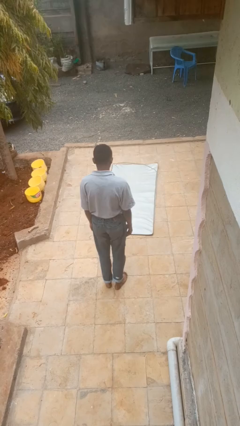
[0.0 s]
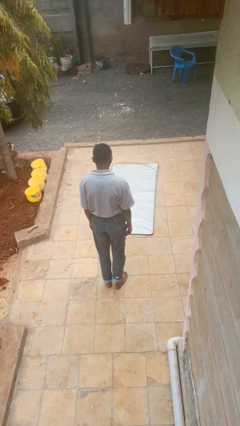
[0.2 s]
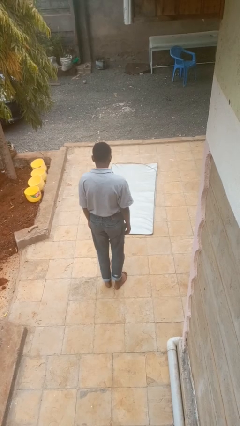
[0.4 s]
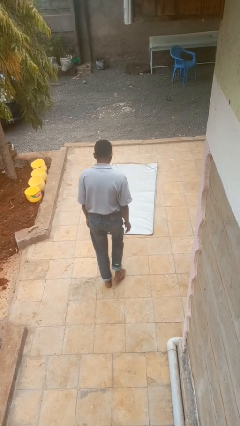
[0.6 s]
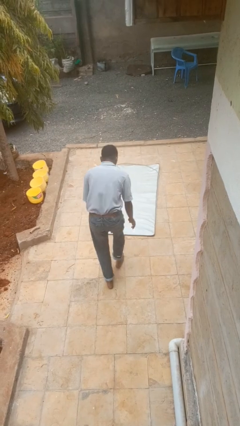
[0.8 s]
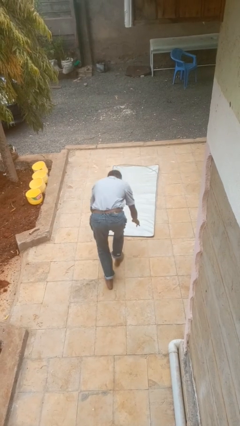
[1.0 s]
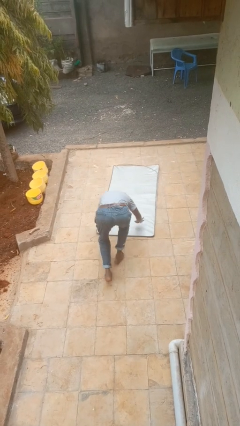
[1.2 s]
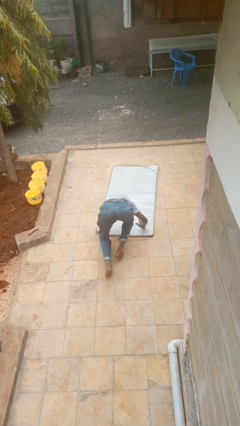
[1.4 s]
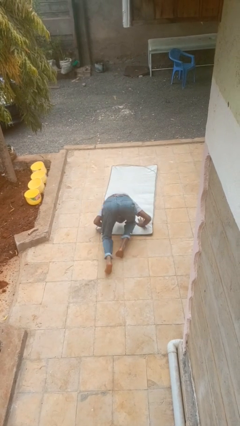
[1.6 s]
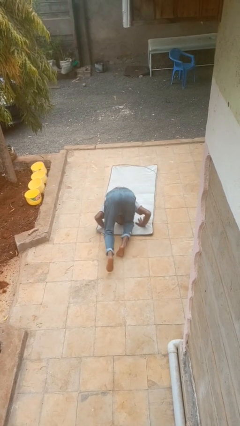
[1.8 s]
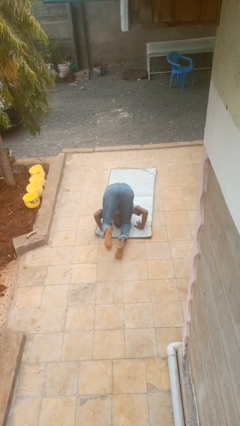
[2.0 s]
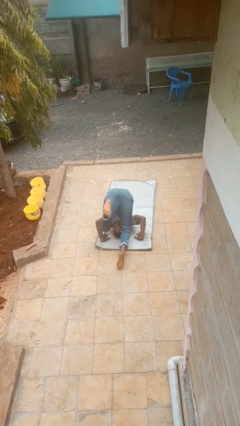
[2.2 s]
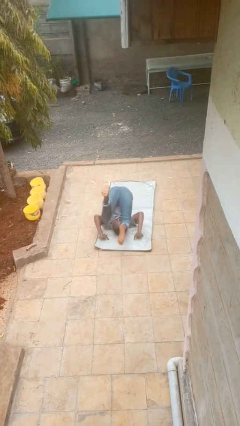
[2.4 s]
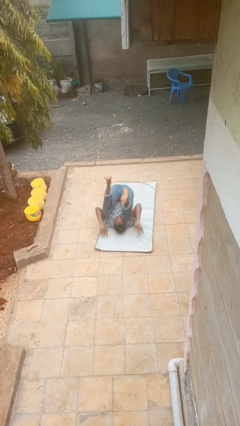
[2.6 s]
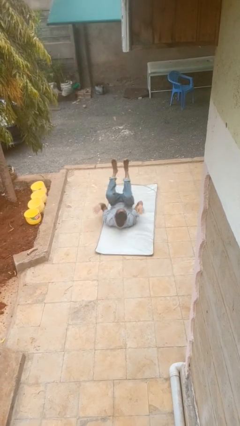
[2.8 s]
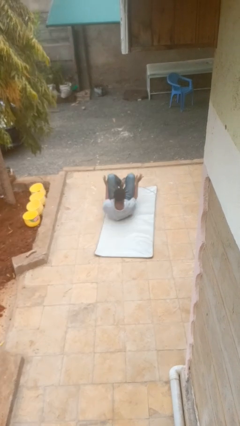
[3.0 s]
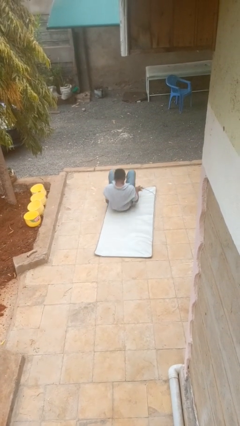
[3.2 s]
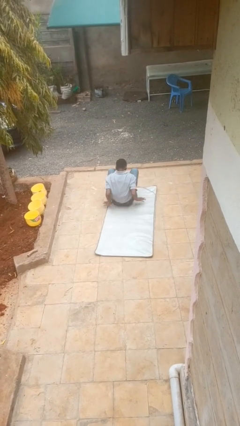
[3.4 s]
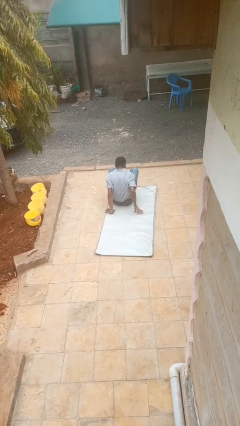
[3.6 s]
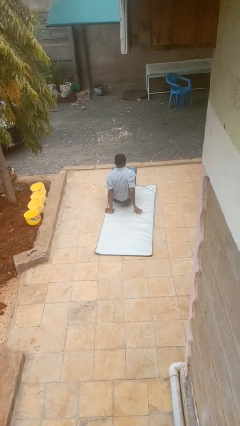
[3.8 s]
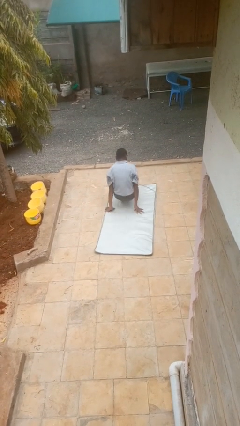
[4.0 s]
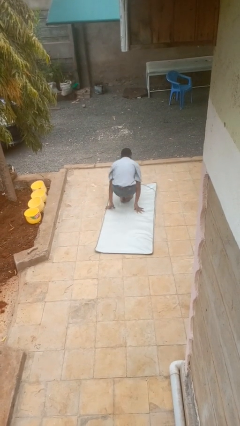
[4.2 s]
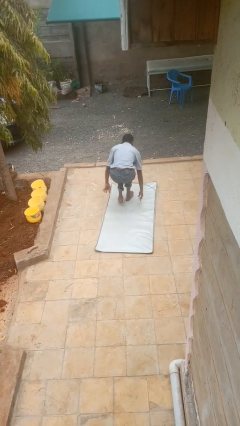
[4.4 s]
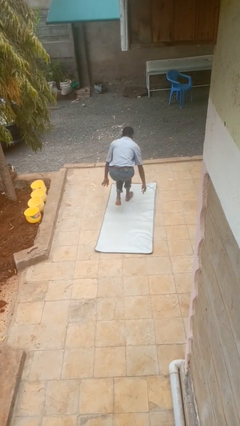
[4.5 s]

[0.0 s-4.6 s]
person somersaults

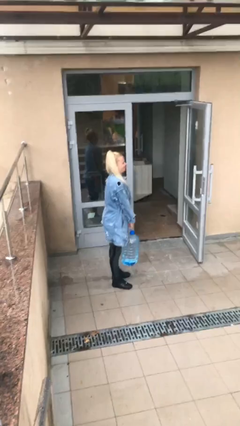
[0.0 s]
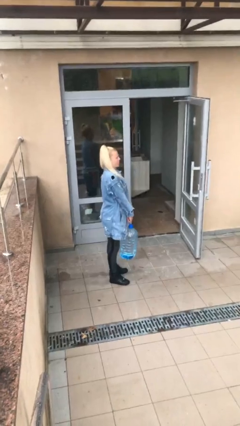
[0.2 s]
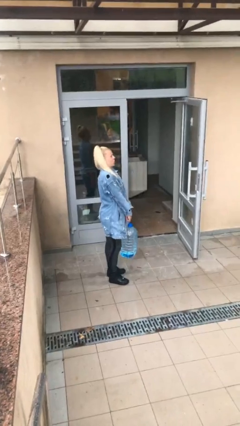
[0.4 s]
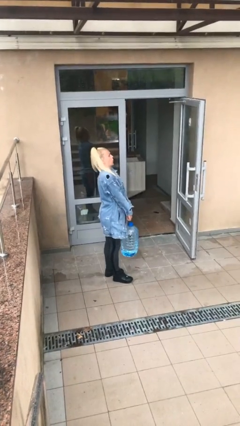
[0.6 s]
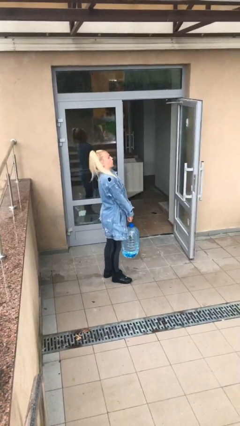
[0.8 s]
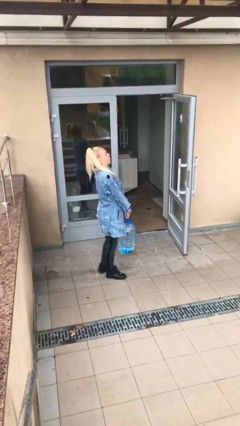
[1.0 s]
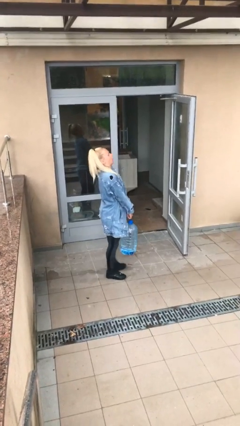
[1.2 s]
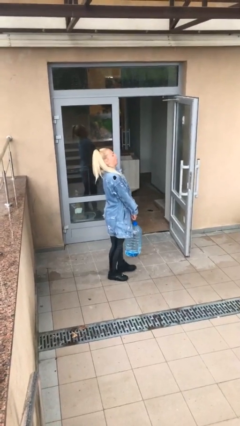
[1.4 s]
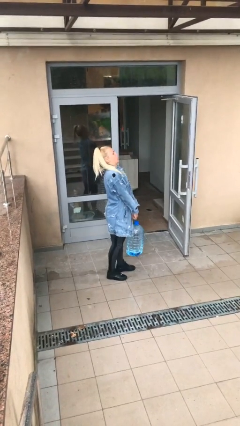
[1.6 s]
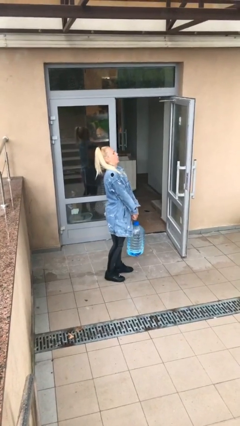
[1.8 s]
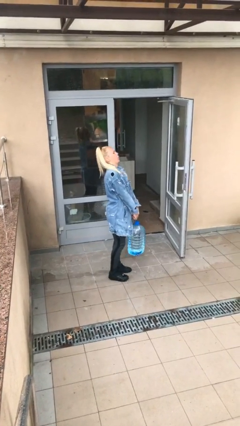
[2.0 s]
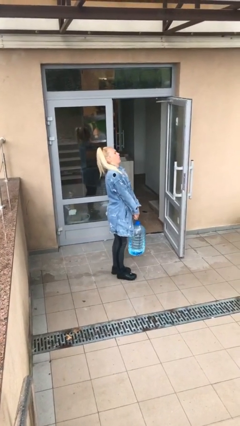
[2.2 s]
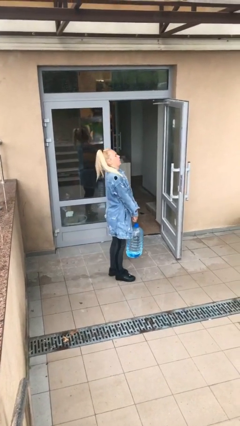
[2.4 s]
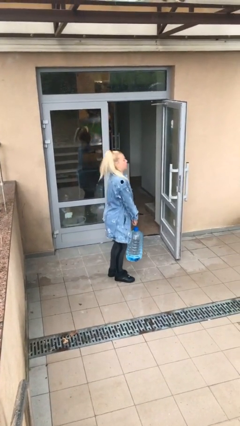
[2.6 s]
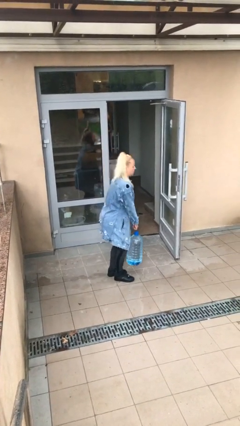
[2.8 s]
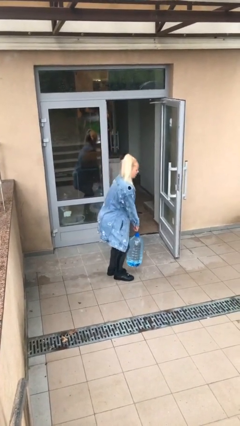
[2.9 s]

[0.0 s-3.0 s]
person carries heavy object

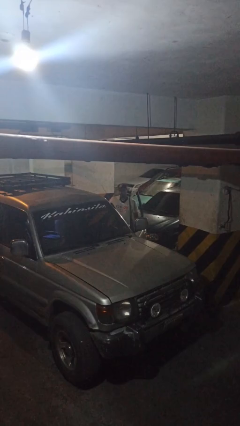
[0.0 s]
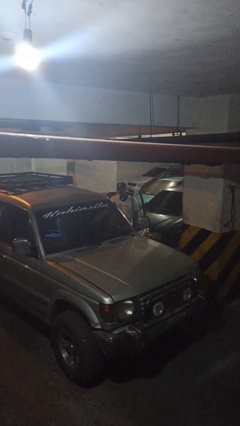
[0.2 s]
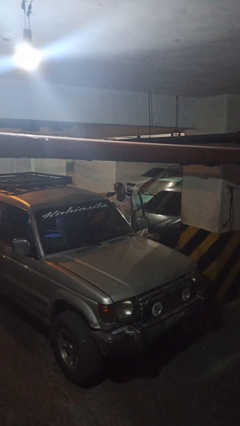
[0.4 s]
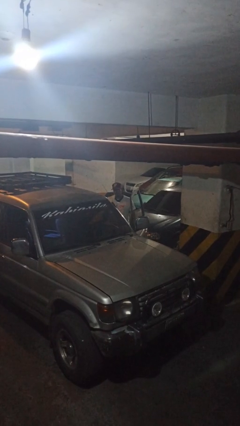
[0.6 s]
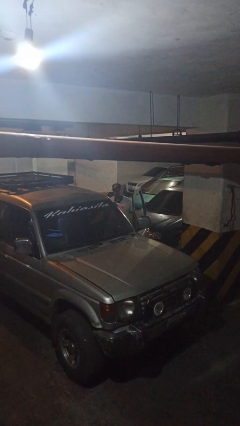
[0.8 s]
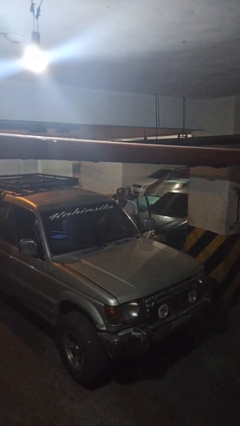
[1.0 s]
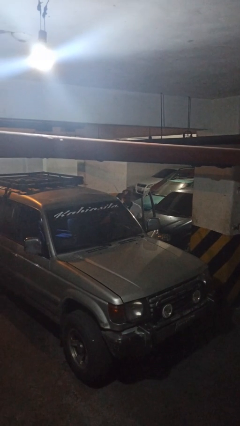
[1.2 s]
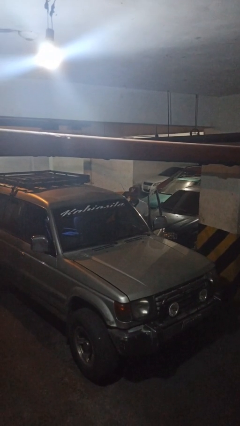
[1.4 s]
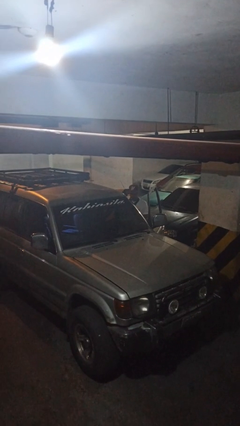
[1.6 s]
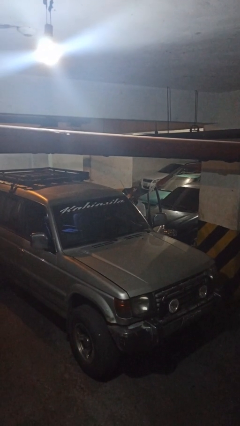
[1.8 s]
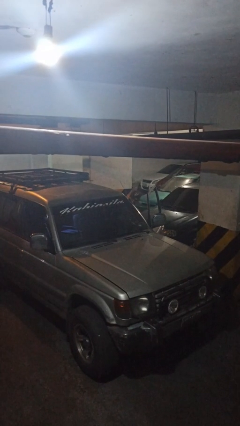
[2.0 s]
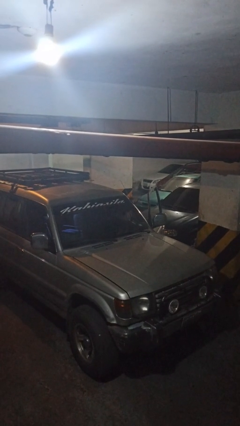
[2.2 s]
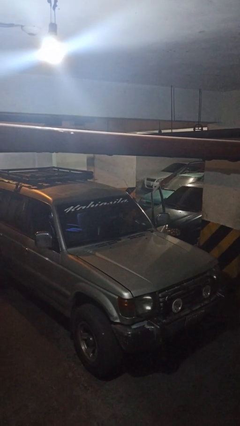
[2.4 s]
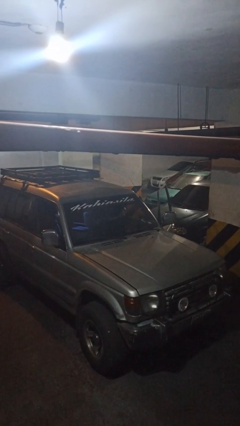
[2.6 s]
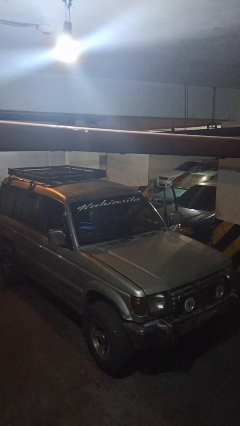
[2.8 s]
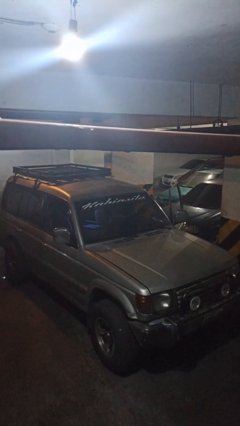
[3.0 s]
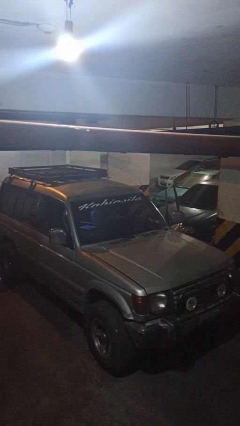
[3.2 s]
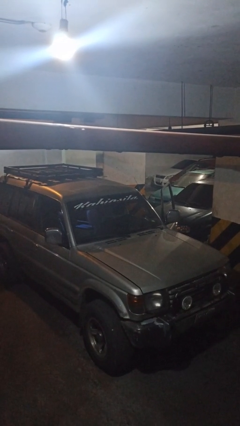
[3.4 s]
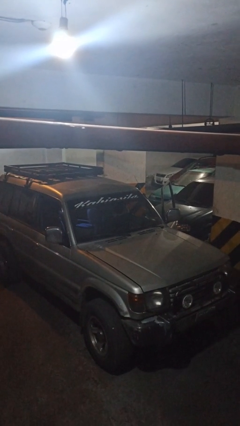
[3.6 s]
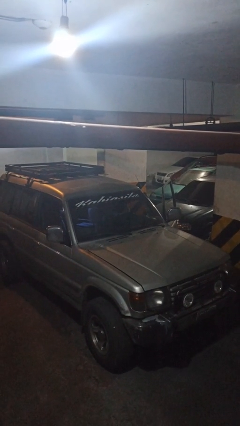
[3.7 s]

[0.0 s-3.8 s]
person enters car

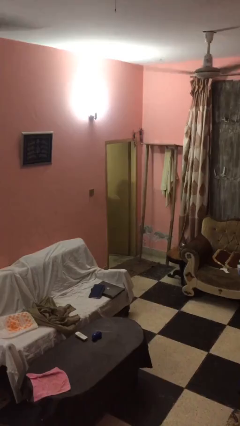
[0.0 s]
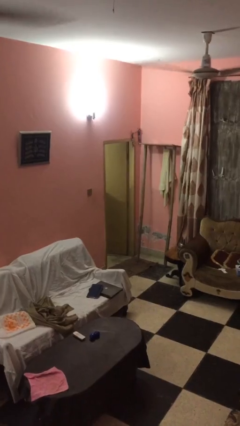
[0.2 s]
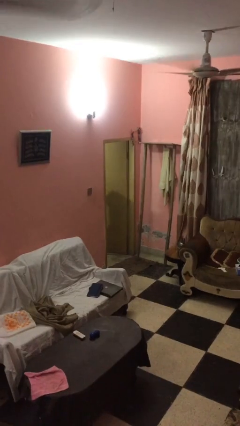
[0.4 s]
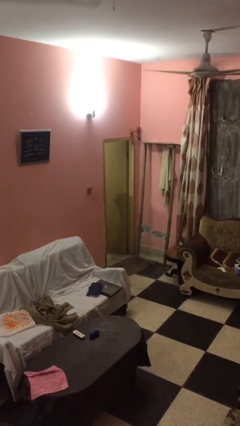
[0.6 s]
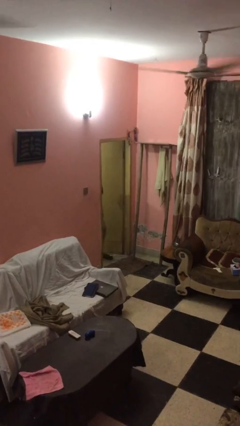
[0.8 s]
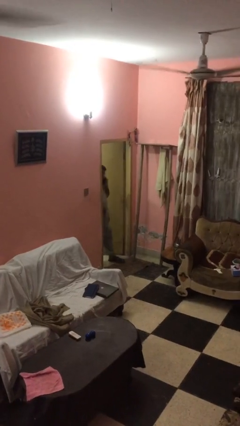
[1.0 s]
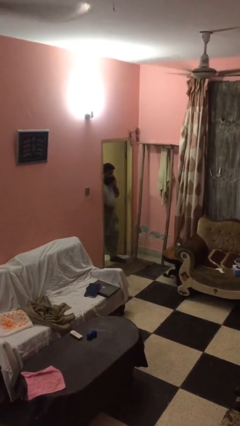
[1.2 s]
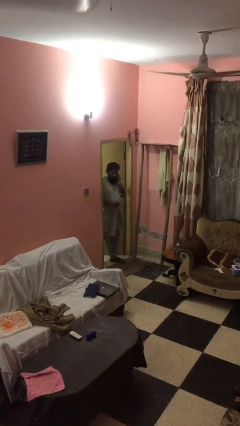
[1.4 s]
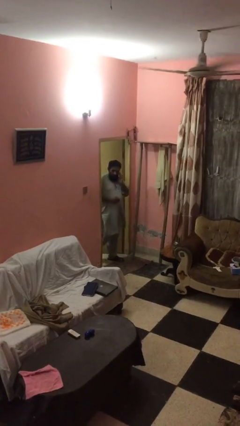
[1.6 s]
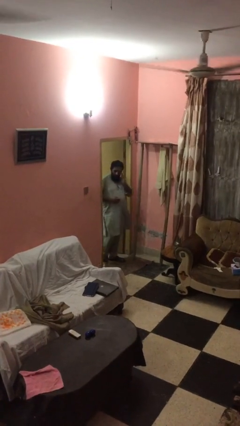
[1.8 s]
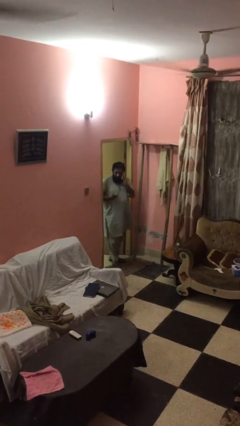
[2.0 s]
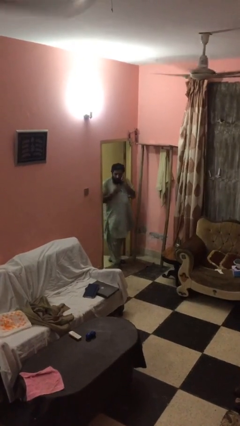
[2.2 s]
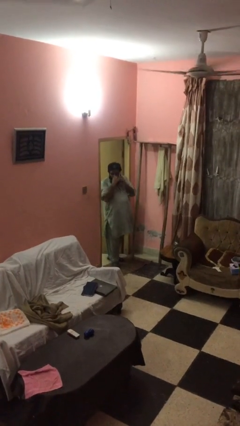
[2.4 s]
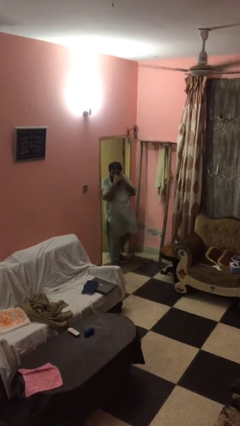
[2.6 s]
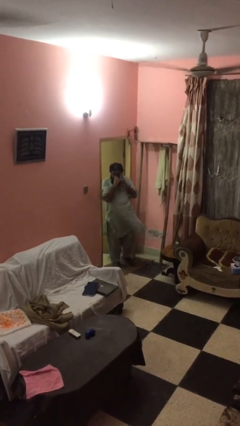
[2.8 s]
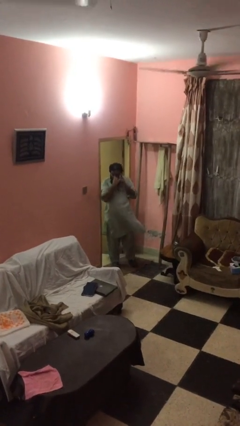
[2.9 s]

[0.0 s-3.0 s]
person enters scene through structure

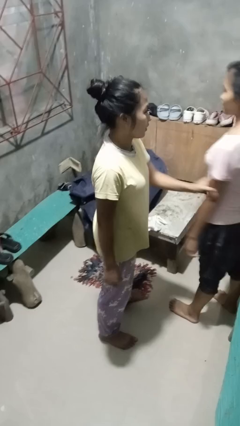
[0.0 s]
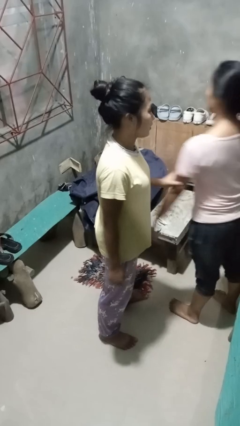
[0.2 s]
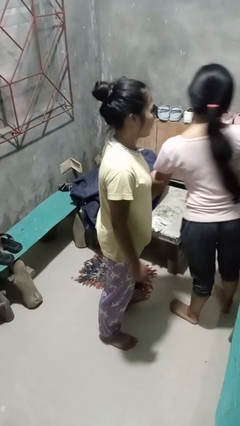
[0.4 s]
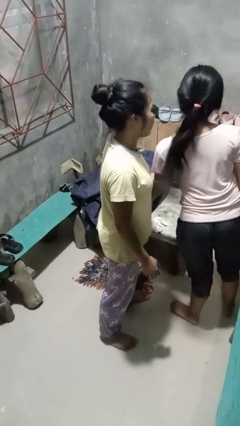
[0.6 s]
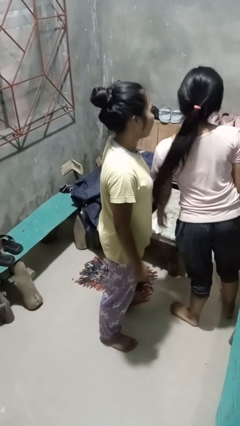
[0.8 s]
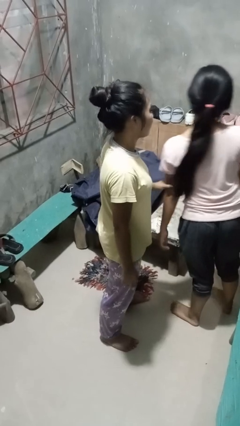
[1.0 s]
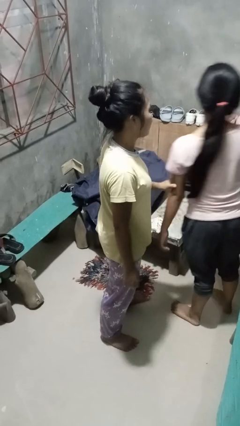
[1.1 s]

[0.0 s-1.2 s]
person grabs person by bicep

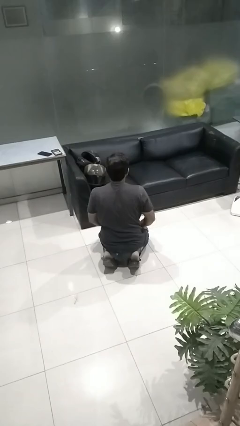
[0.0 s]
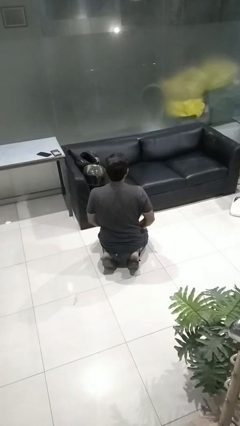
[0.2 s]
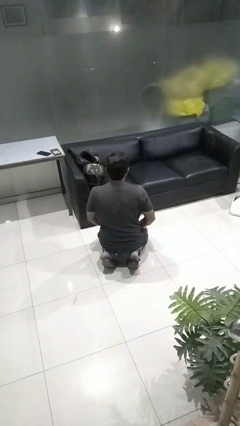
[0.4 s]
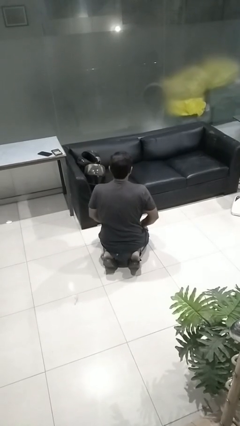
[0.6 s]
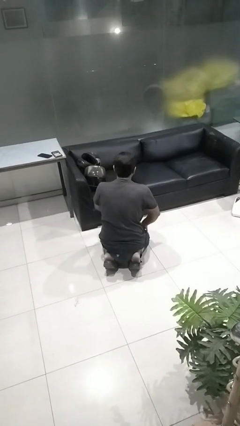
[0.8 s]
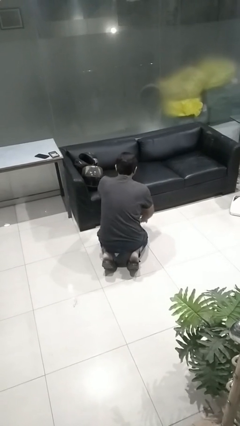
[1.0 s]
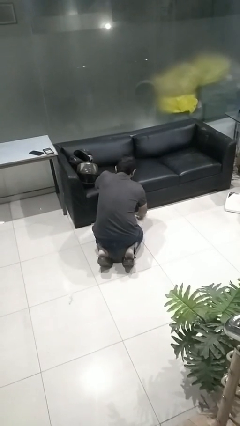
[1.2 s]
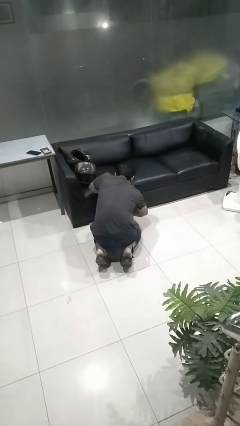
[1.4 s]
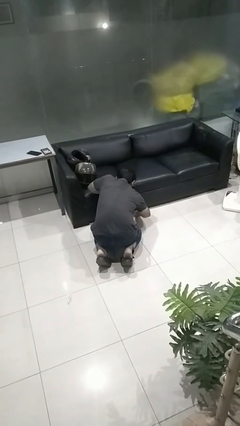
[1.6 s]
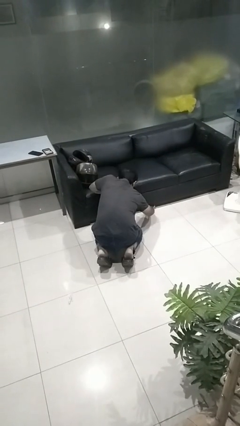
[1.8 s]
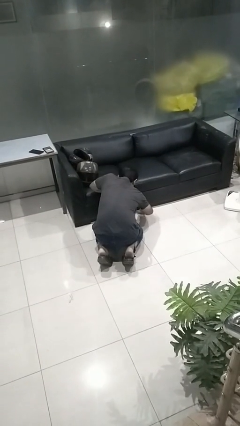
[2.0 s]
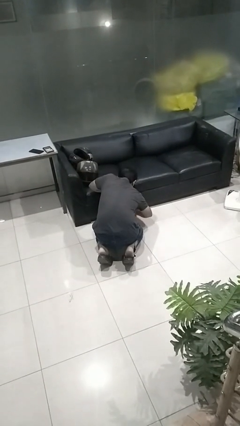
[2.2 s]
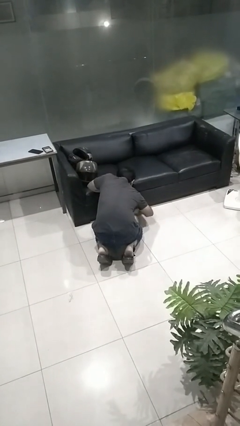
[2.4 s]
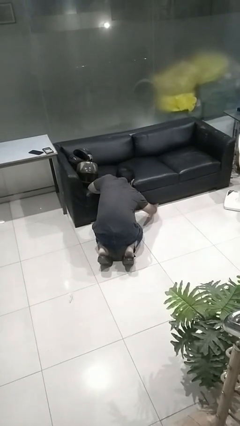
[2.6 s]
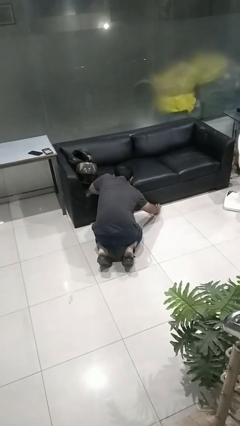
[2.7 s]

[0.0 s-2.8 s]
person searches under couch
